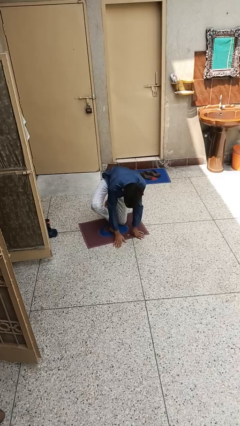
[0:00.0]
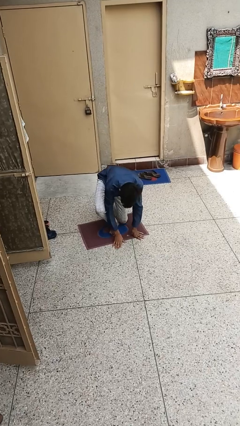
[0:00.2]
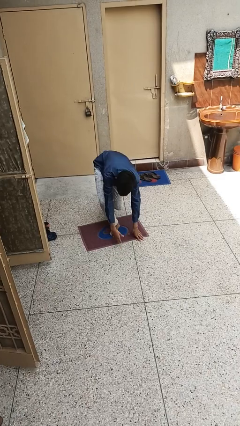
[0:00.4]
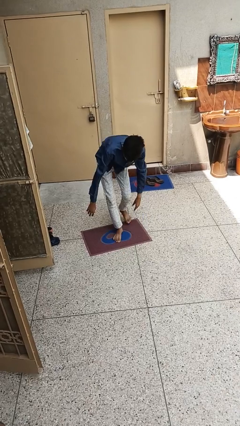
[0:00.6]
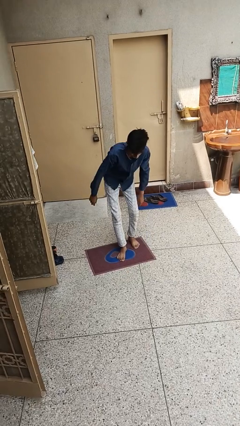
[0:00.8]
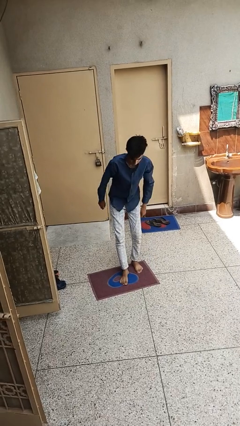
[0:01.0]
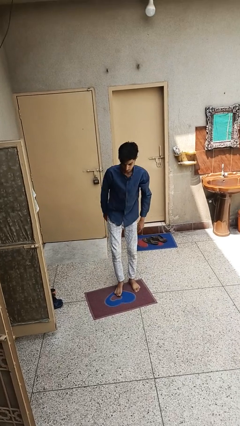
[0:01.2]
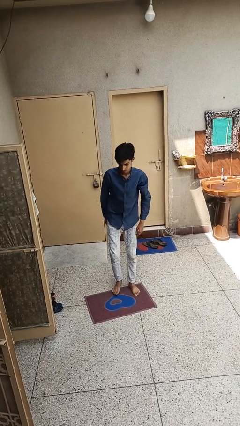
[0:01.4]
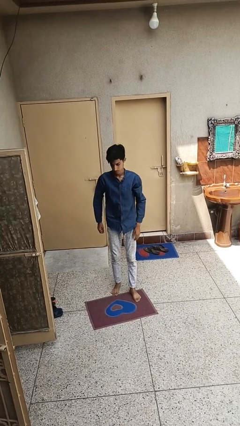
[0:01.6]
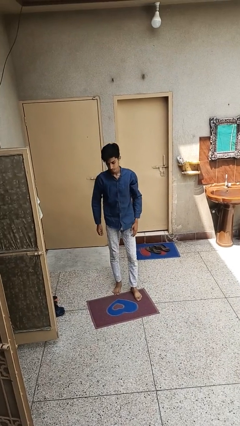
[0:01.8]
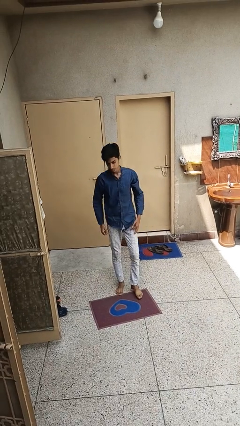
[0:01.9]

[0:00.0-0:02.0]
person stands up from floor

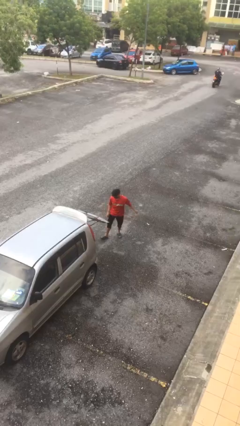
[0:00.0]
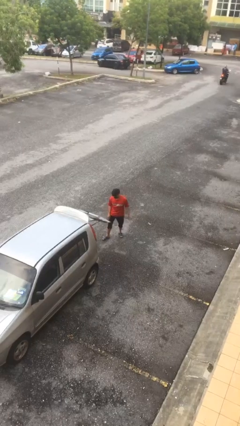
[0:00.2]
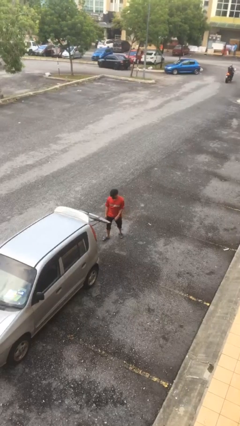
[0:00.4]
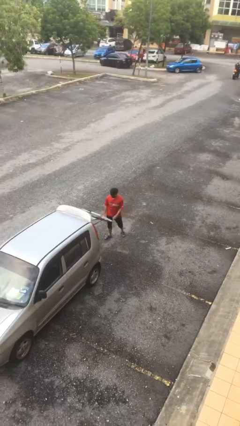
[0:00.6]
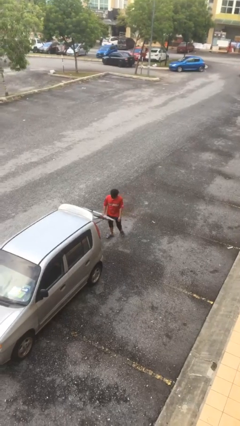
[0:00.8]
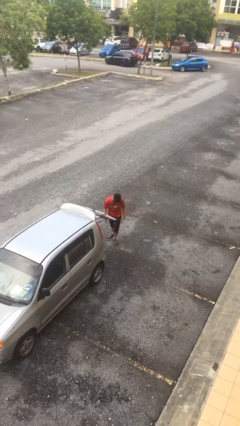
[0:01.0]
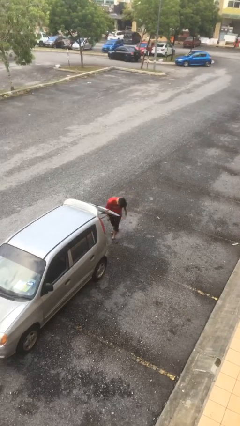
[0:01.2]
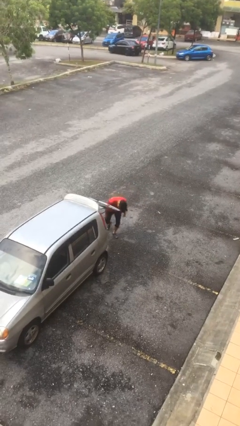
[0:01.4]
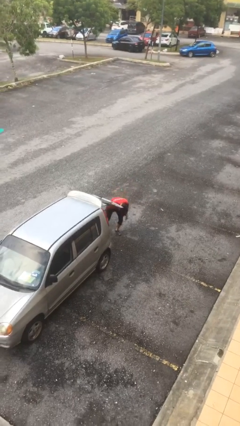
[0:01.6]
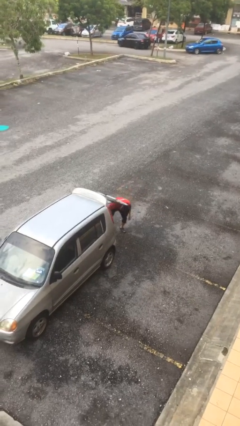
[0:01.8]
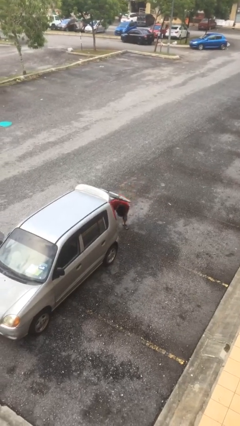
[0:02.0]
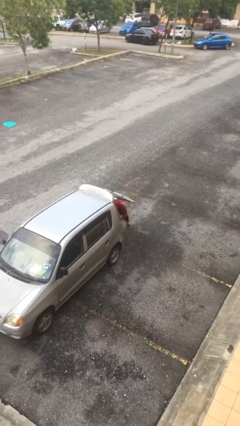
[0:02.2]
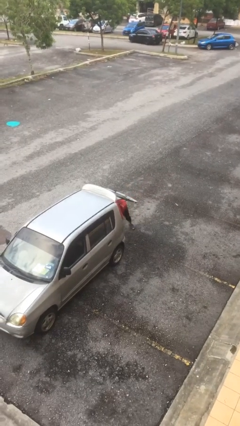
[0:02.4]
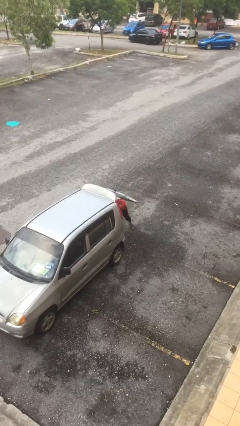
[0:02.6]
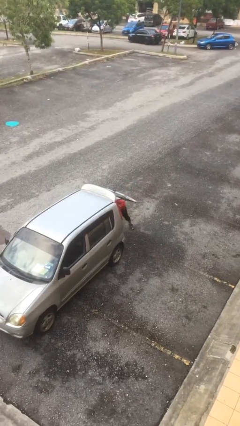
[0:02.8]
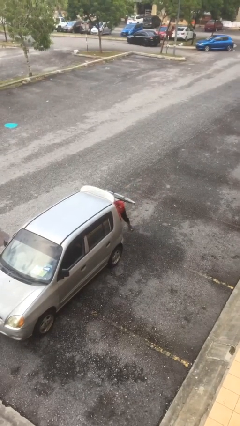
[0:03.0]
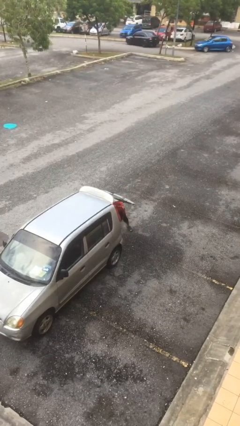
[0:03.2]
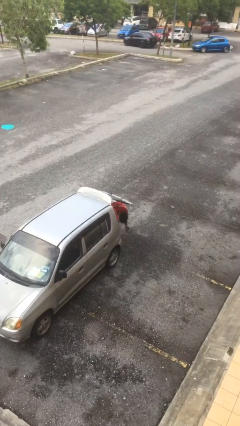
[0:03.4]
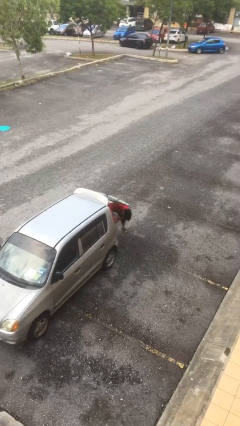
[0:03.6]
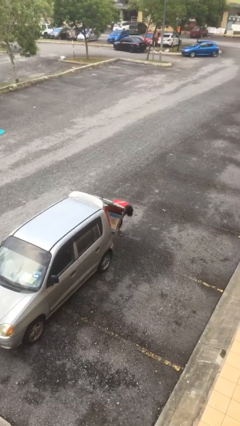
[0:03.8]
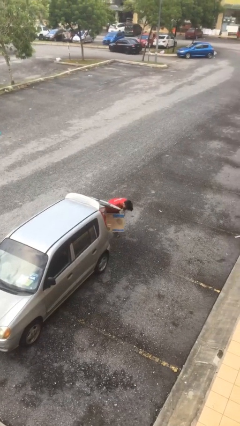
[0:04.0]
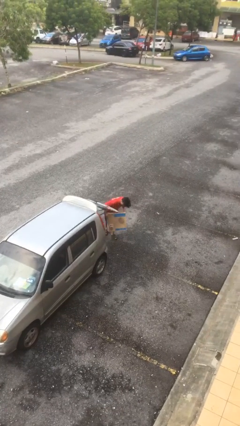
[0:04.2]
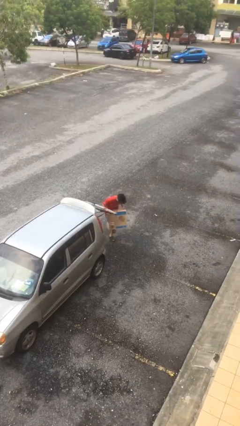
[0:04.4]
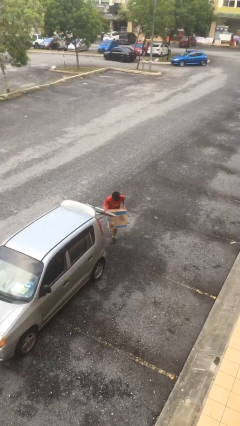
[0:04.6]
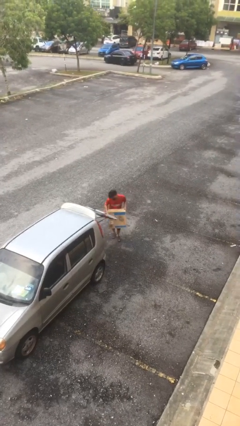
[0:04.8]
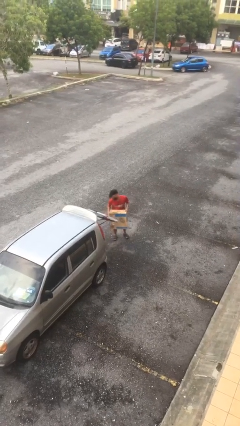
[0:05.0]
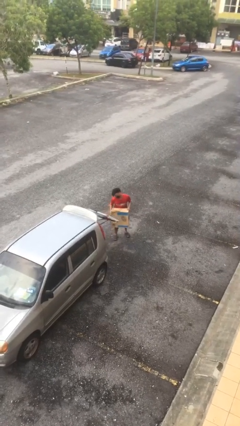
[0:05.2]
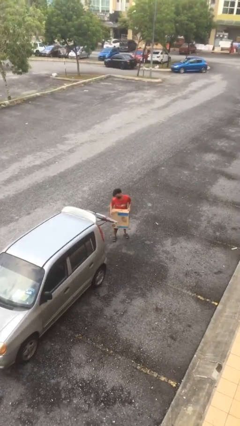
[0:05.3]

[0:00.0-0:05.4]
person unloads car

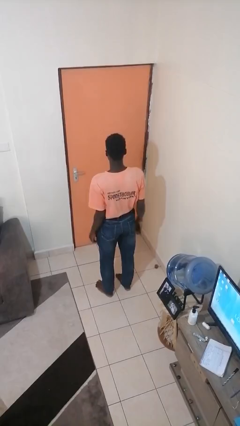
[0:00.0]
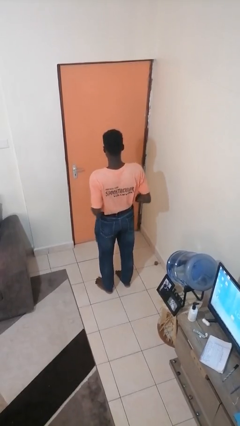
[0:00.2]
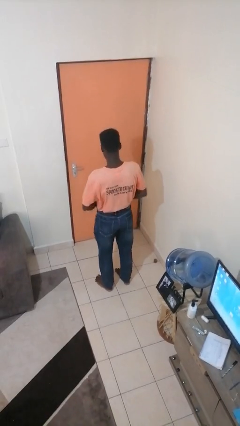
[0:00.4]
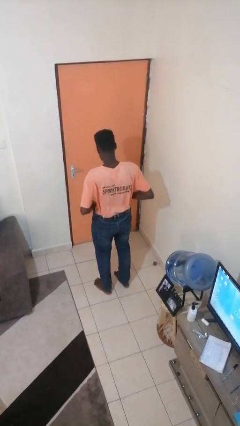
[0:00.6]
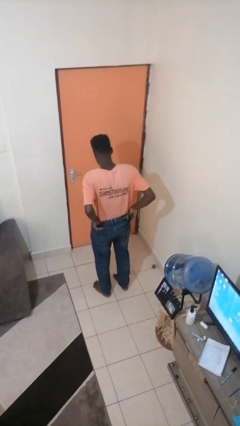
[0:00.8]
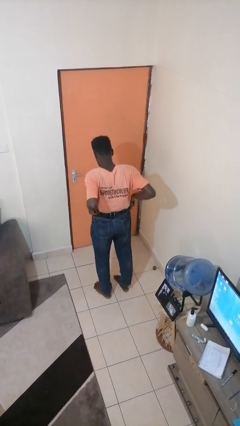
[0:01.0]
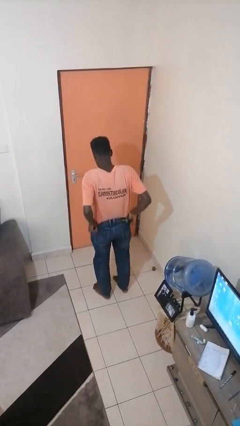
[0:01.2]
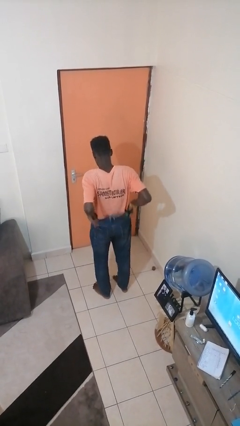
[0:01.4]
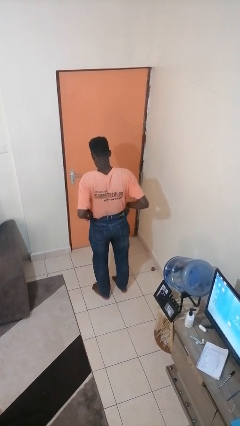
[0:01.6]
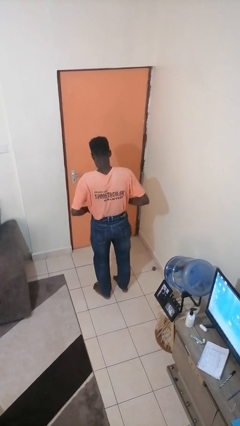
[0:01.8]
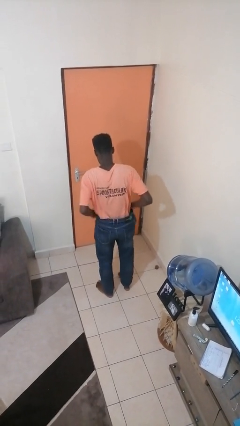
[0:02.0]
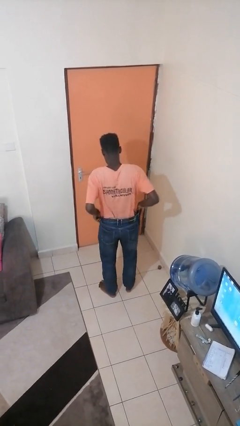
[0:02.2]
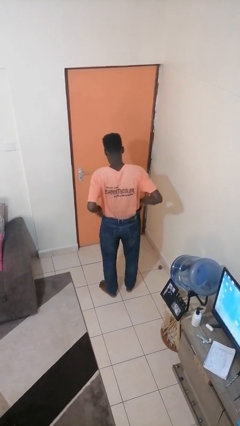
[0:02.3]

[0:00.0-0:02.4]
person hikes up pants

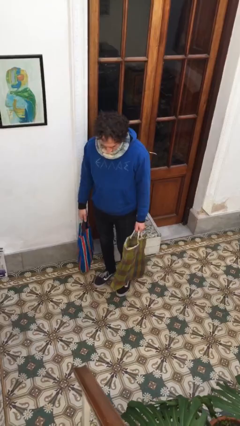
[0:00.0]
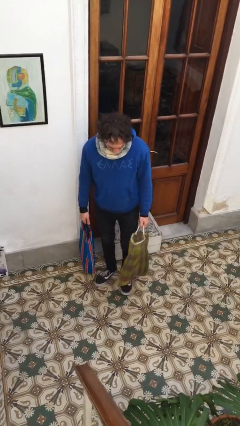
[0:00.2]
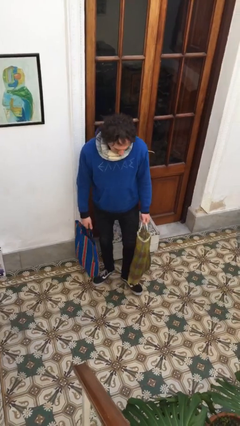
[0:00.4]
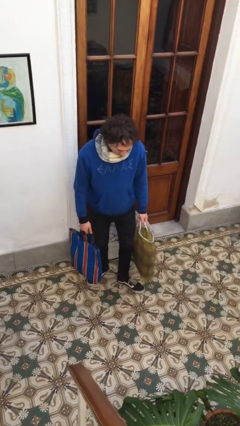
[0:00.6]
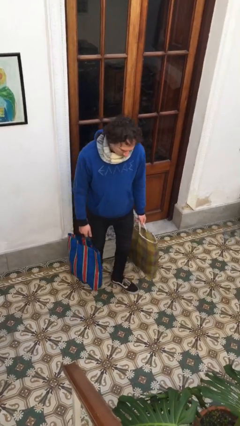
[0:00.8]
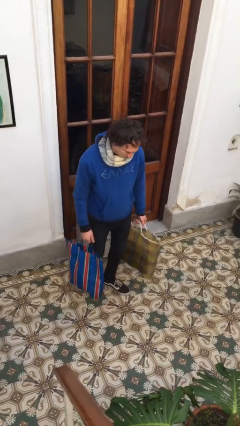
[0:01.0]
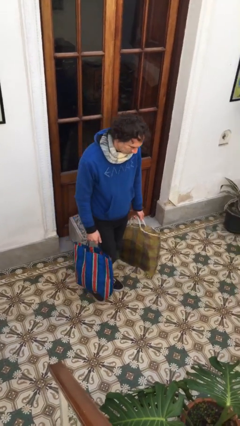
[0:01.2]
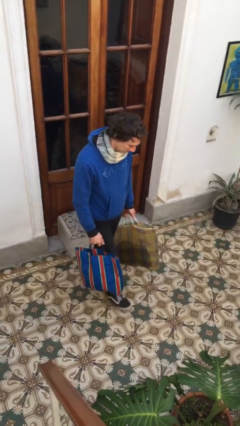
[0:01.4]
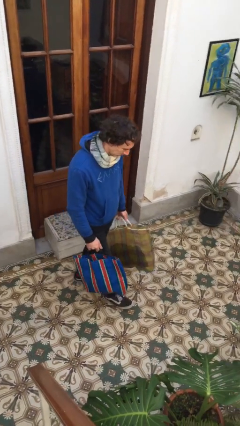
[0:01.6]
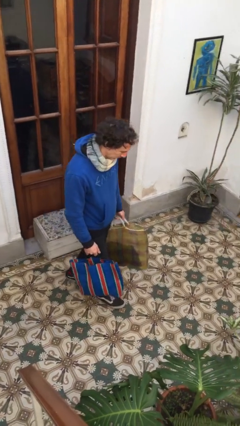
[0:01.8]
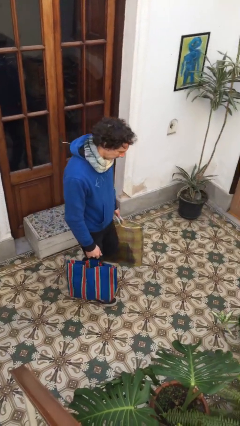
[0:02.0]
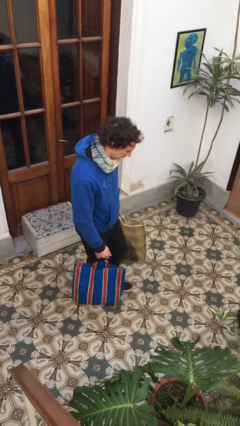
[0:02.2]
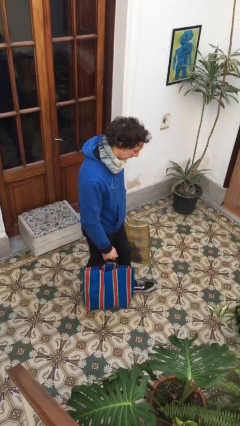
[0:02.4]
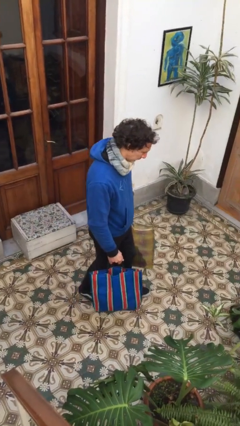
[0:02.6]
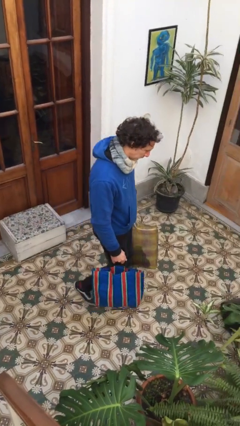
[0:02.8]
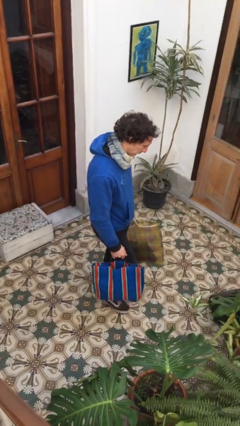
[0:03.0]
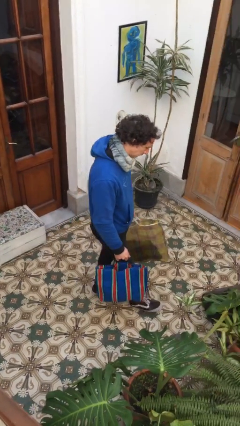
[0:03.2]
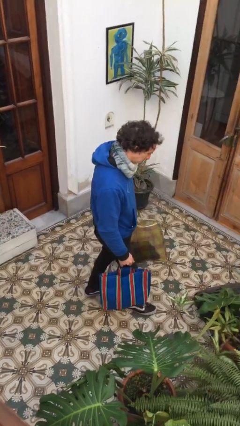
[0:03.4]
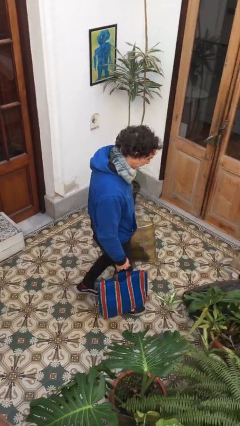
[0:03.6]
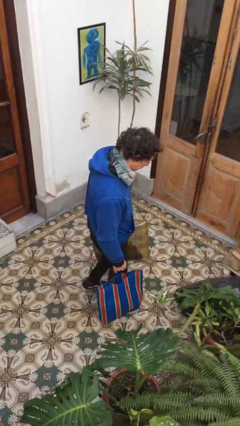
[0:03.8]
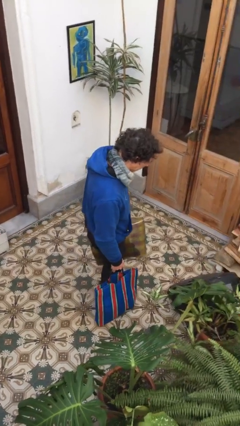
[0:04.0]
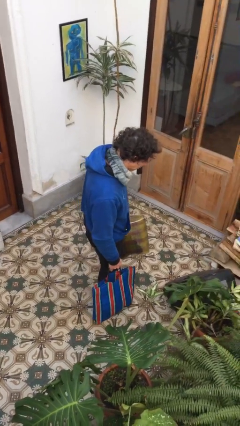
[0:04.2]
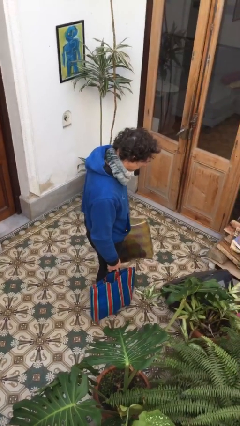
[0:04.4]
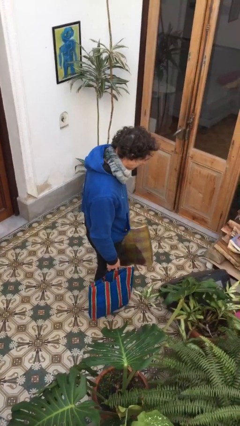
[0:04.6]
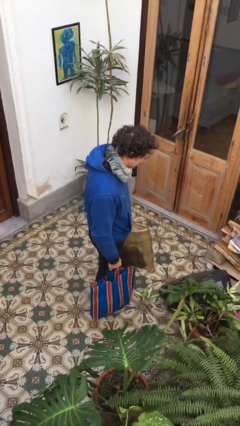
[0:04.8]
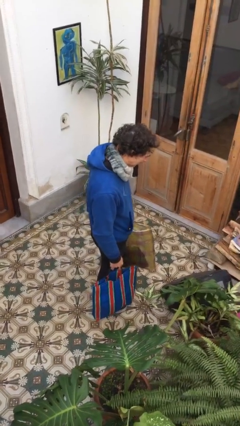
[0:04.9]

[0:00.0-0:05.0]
person carries groceries

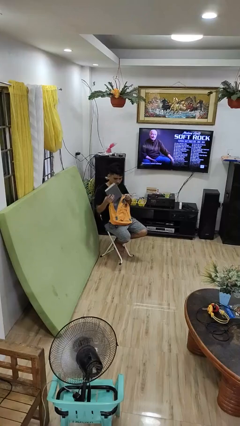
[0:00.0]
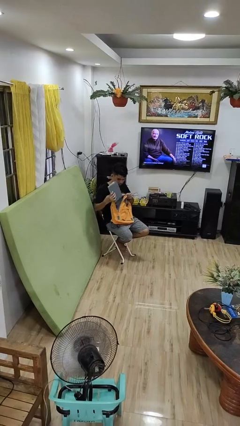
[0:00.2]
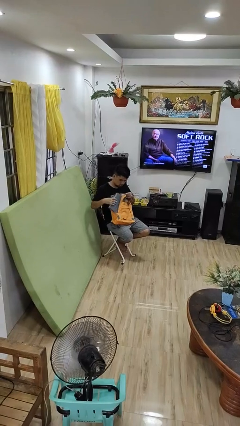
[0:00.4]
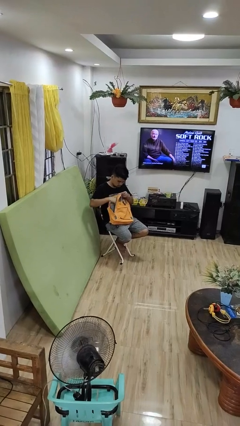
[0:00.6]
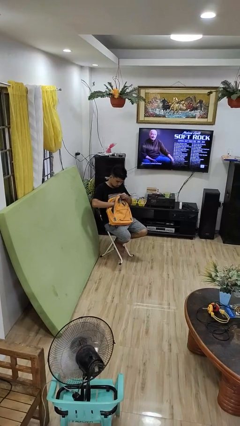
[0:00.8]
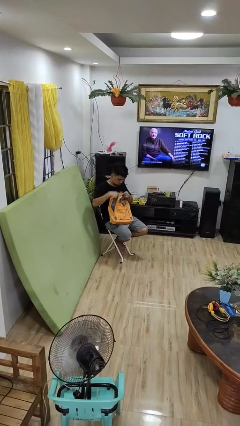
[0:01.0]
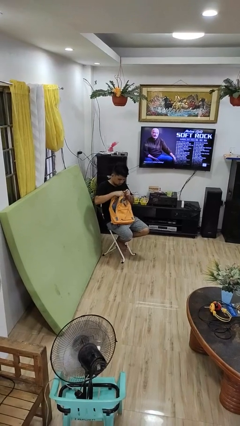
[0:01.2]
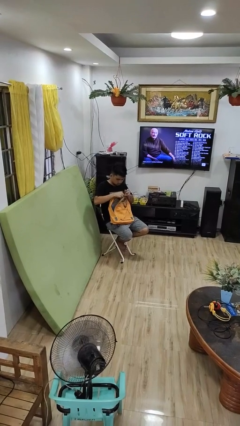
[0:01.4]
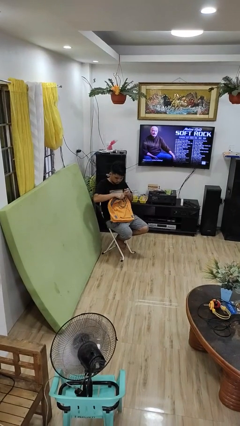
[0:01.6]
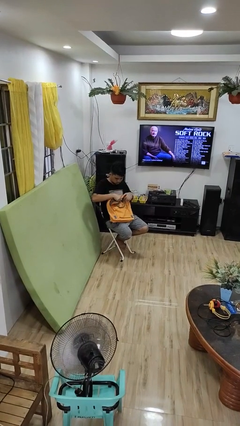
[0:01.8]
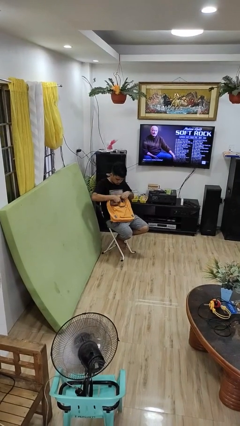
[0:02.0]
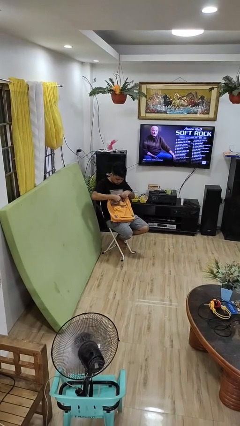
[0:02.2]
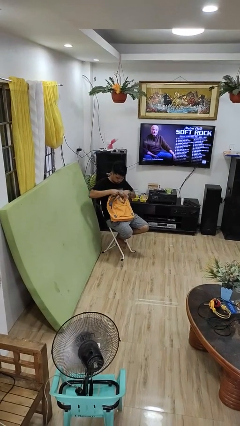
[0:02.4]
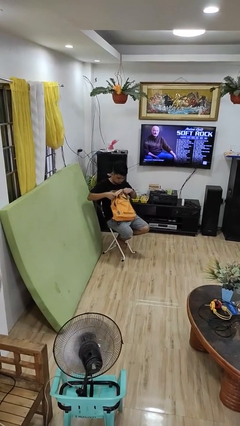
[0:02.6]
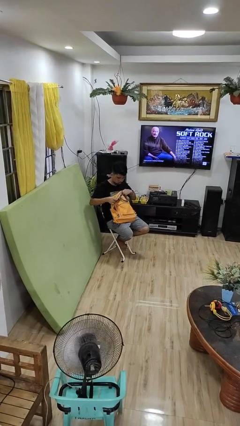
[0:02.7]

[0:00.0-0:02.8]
person puts object into backpack
